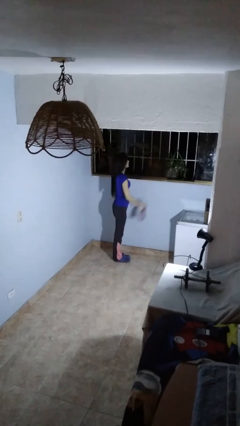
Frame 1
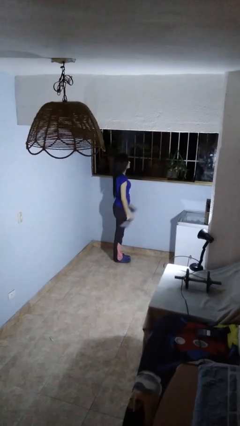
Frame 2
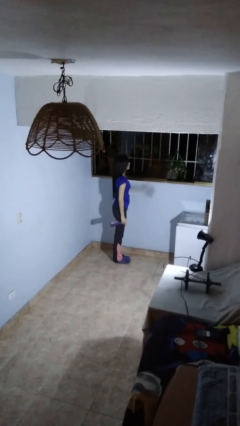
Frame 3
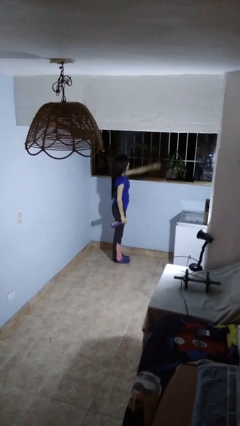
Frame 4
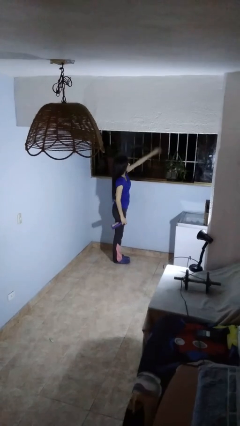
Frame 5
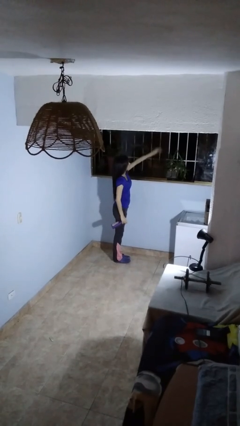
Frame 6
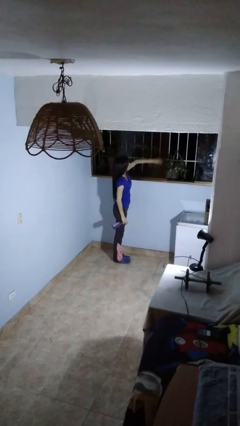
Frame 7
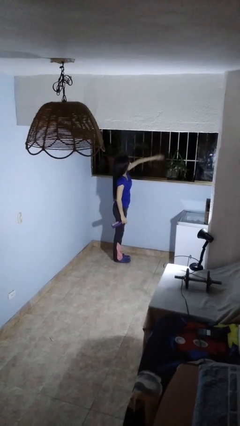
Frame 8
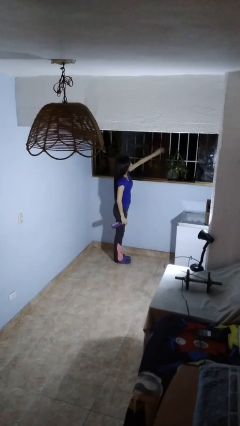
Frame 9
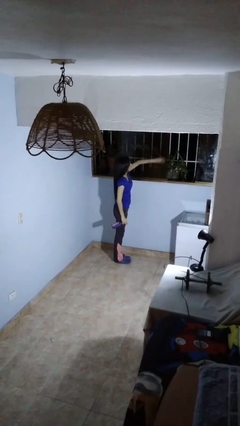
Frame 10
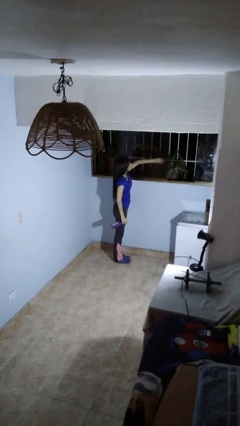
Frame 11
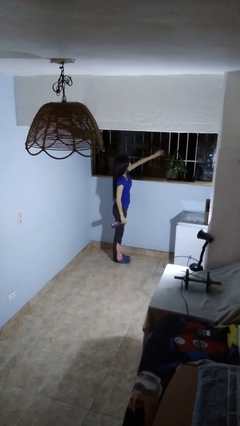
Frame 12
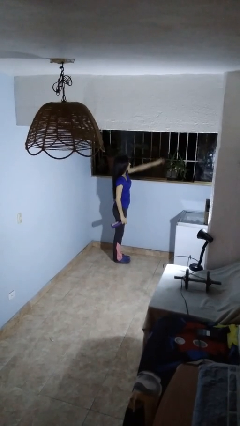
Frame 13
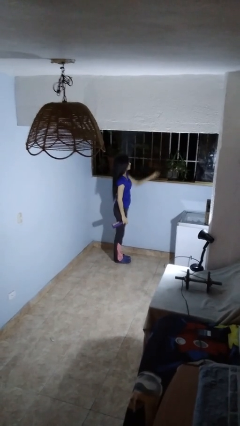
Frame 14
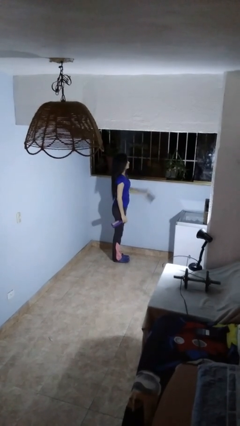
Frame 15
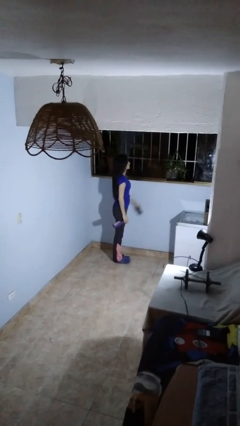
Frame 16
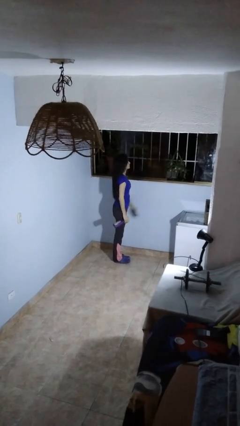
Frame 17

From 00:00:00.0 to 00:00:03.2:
person washes window

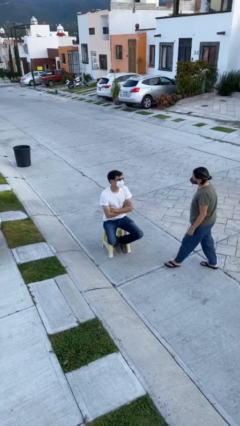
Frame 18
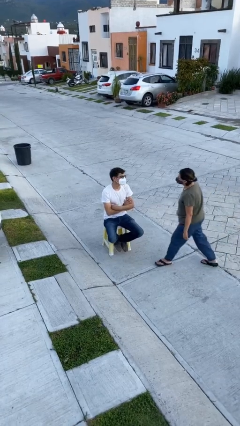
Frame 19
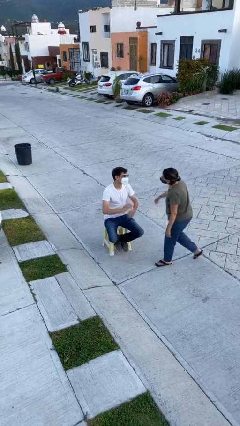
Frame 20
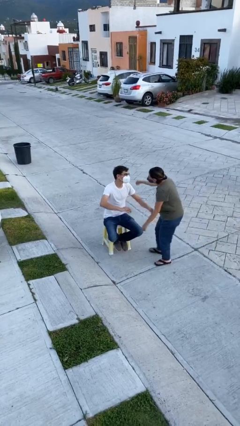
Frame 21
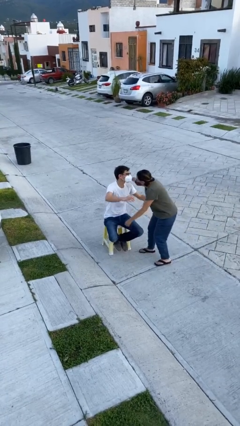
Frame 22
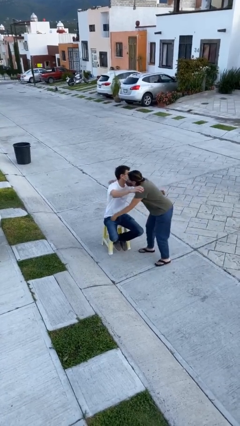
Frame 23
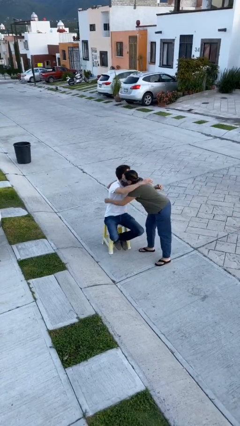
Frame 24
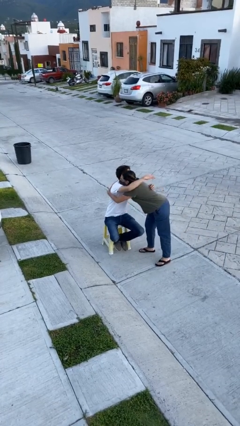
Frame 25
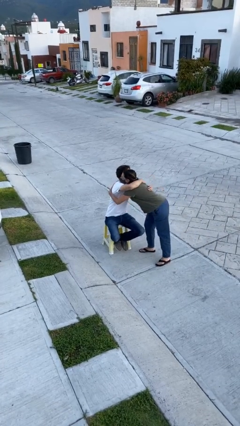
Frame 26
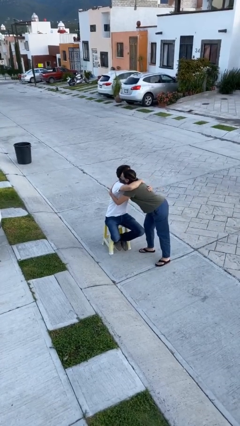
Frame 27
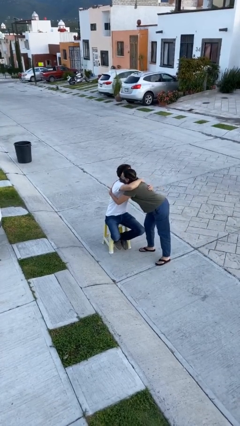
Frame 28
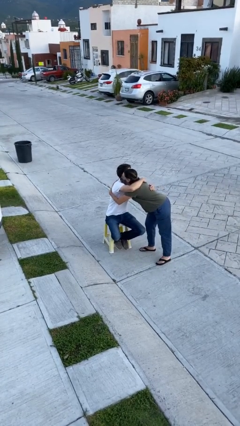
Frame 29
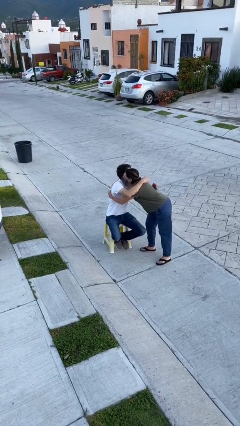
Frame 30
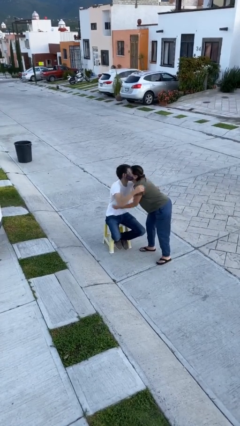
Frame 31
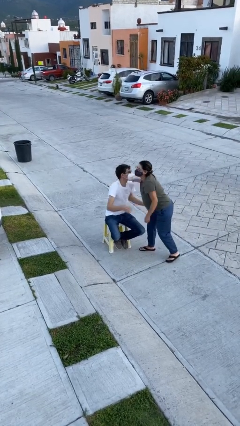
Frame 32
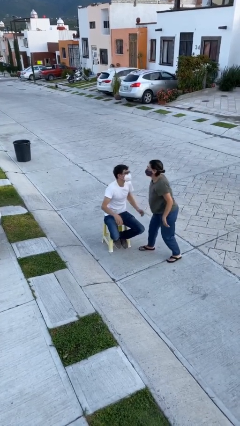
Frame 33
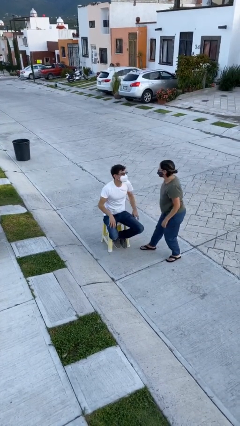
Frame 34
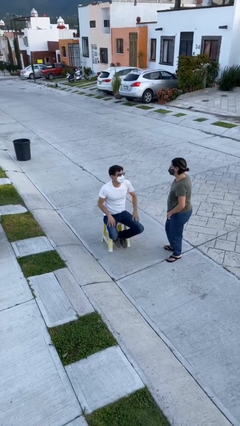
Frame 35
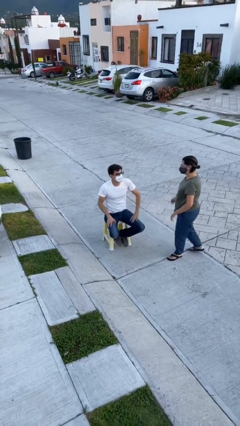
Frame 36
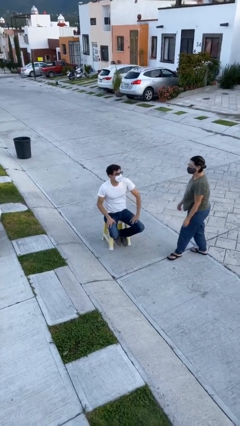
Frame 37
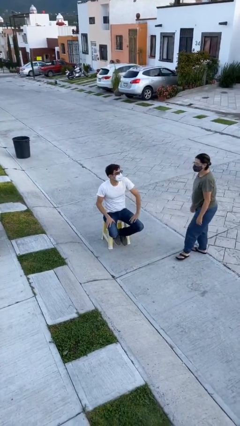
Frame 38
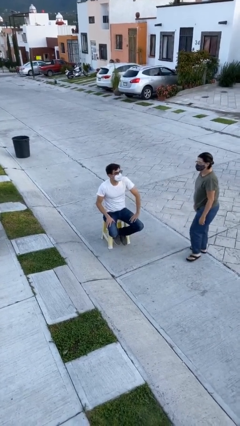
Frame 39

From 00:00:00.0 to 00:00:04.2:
person embraces person

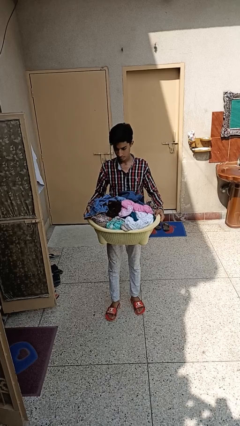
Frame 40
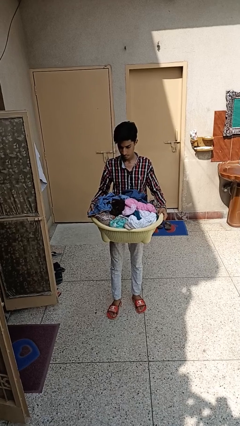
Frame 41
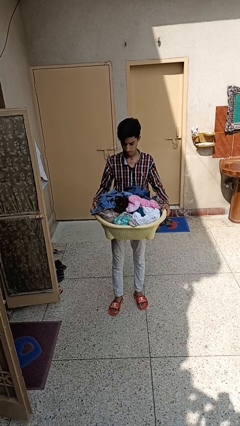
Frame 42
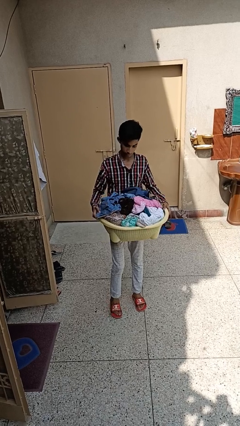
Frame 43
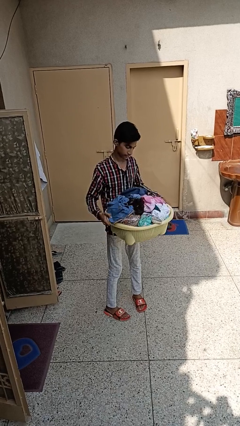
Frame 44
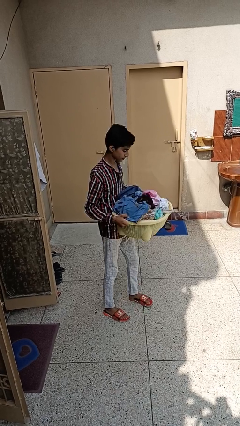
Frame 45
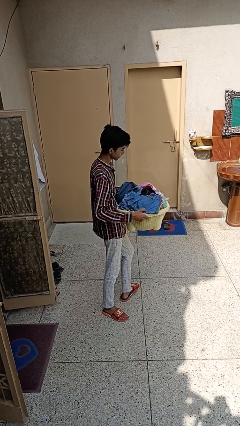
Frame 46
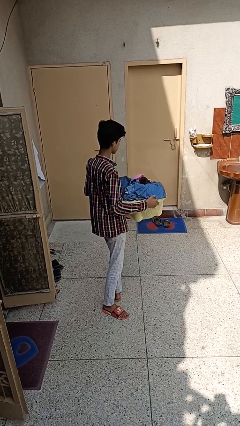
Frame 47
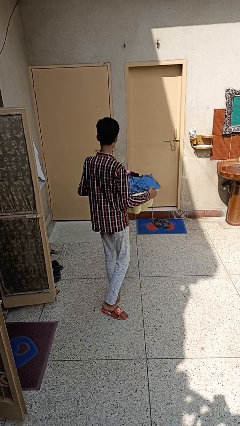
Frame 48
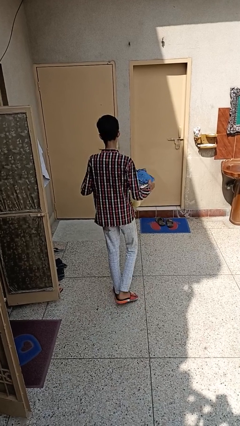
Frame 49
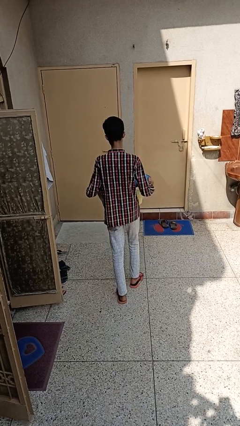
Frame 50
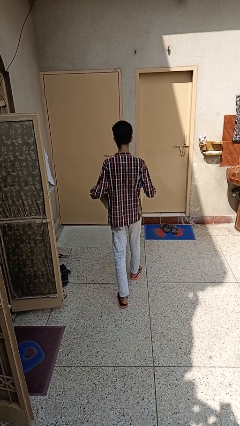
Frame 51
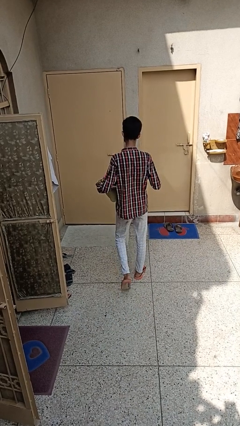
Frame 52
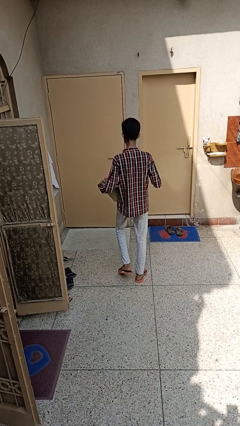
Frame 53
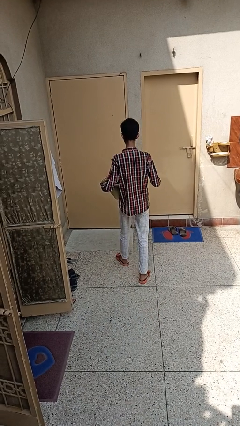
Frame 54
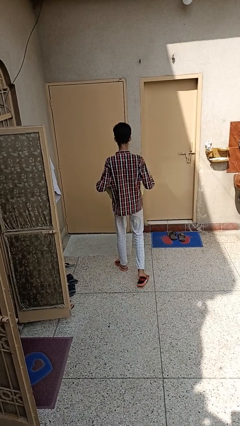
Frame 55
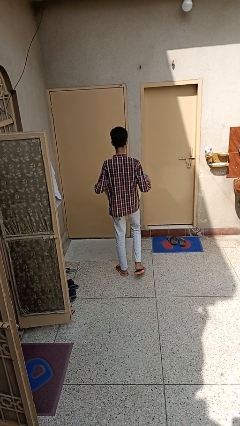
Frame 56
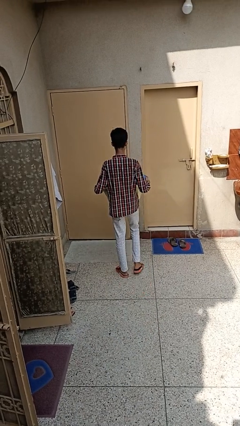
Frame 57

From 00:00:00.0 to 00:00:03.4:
person carries laundry basket

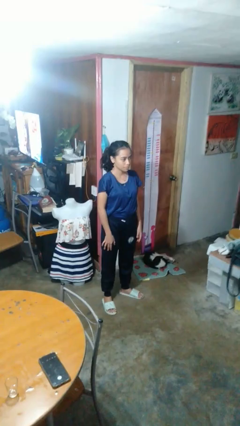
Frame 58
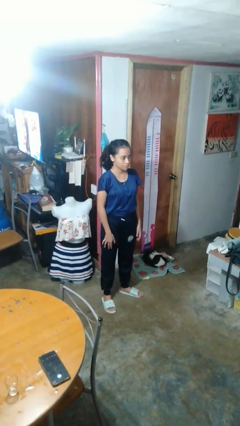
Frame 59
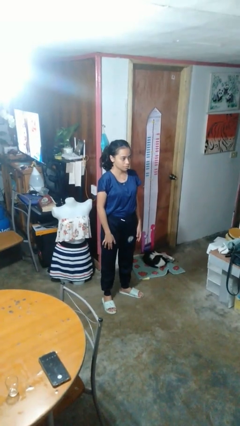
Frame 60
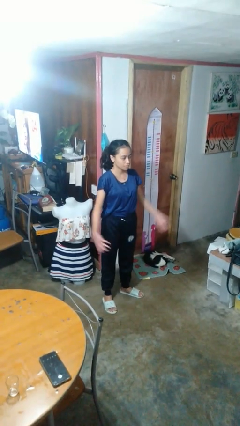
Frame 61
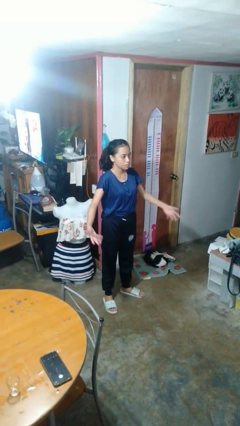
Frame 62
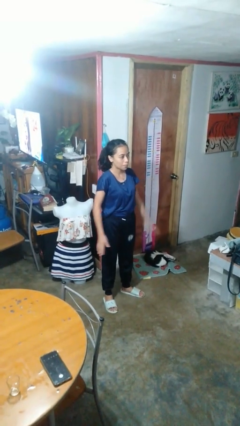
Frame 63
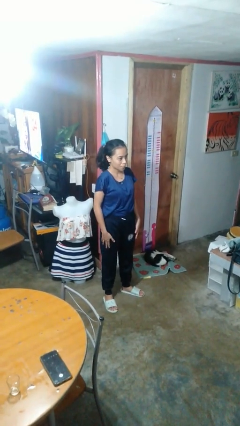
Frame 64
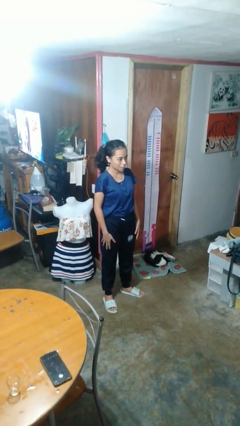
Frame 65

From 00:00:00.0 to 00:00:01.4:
person slaps hands on thighs

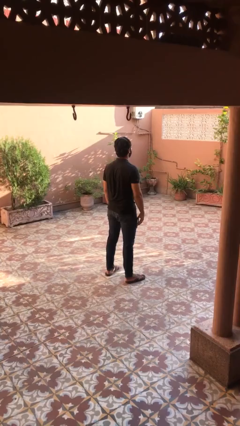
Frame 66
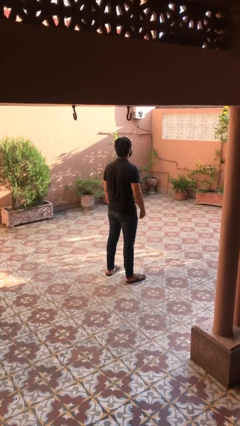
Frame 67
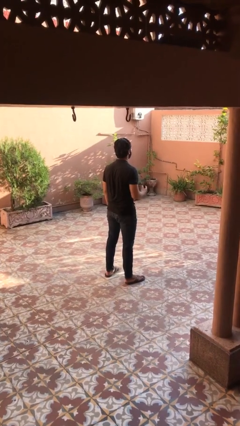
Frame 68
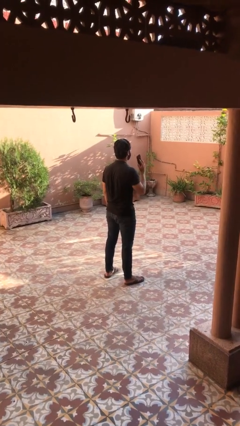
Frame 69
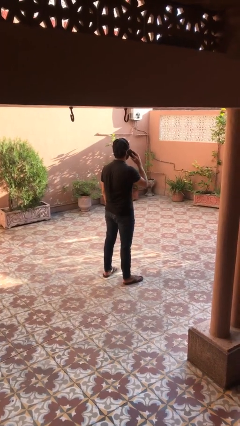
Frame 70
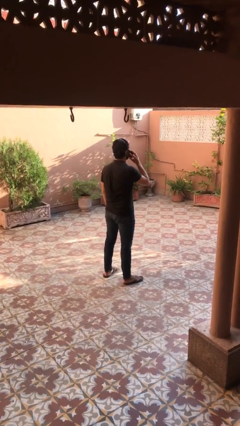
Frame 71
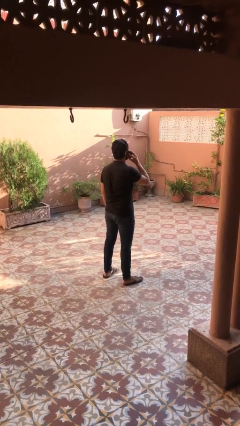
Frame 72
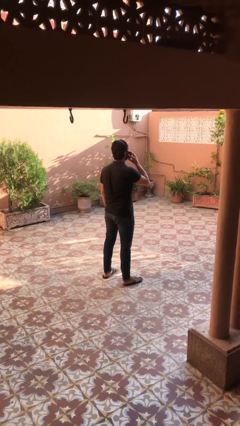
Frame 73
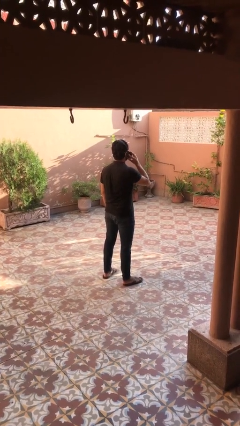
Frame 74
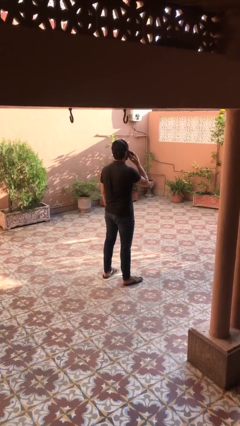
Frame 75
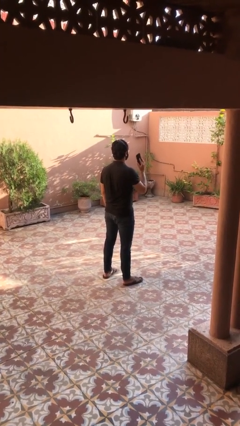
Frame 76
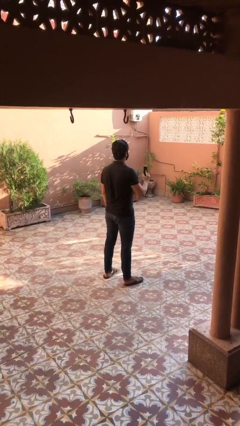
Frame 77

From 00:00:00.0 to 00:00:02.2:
person gestures call me

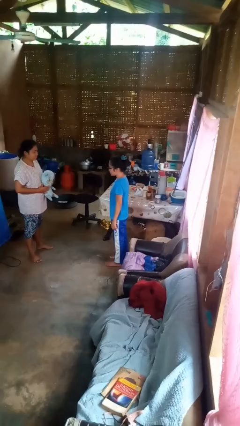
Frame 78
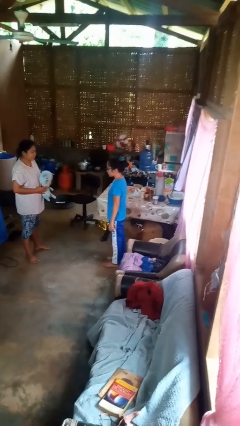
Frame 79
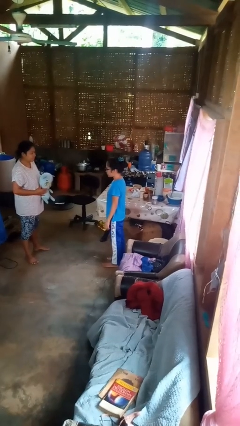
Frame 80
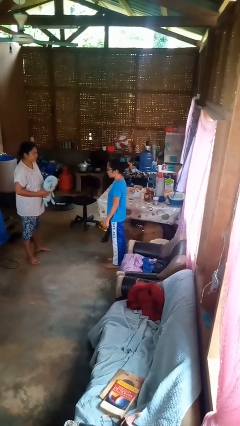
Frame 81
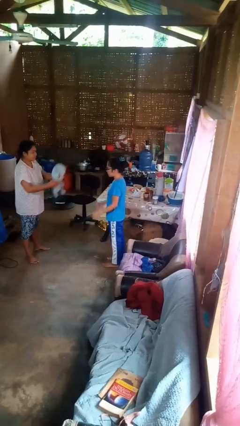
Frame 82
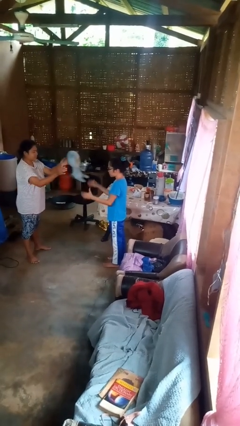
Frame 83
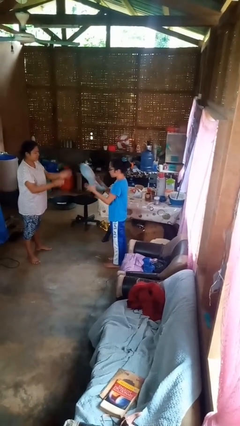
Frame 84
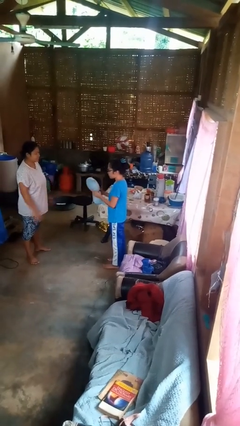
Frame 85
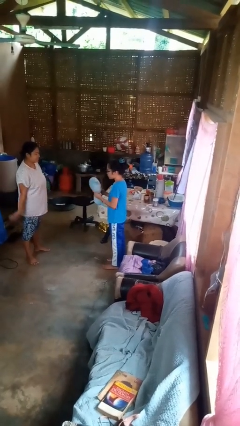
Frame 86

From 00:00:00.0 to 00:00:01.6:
person catches object from person

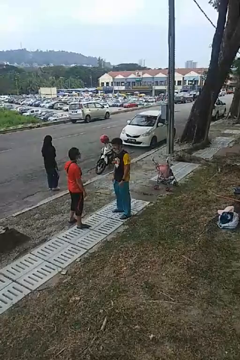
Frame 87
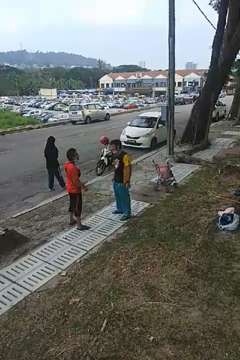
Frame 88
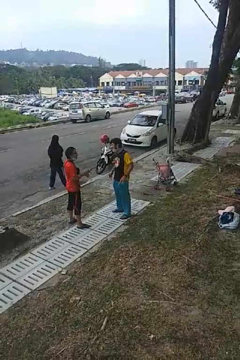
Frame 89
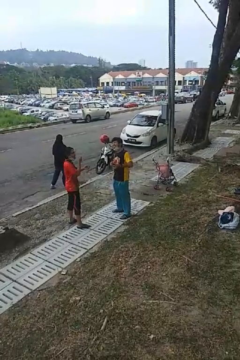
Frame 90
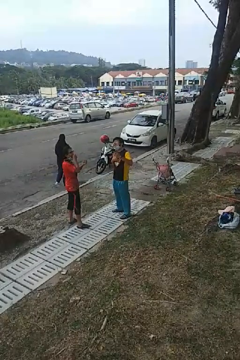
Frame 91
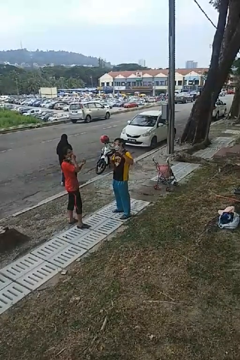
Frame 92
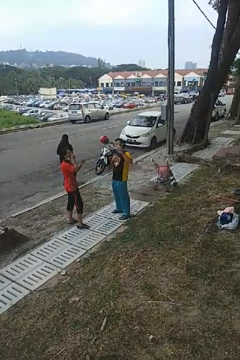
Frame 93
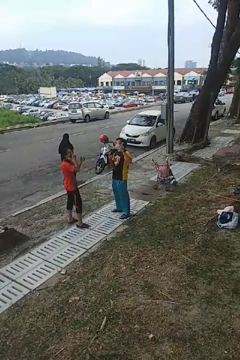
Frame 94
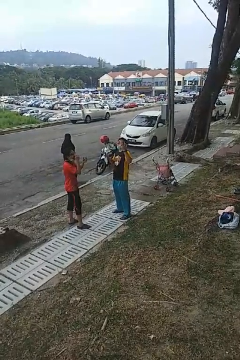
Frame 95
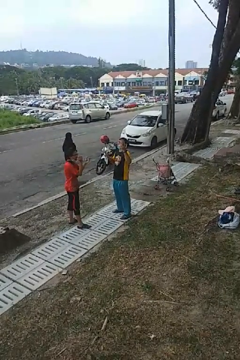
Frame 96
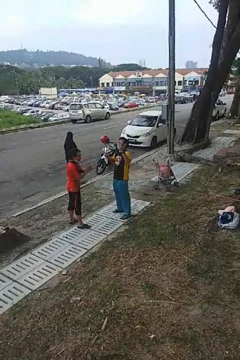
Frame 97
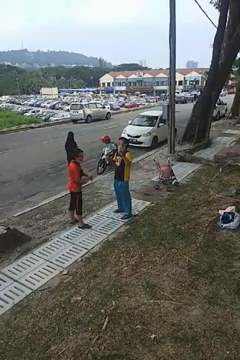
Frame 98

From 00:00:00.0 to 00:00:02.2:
person laughs with person
